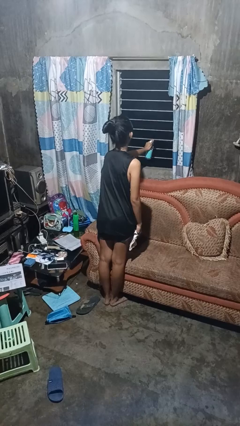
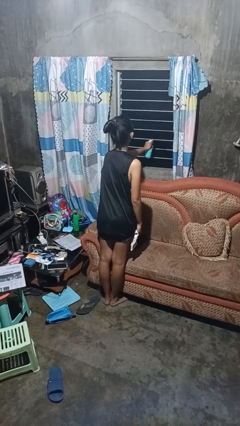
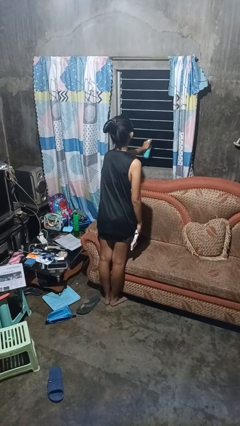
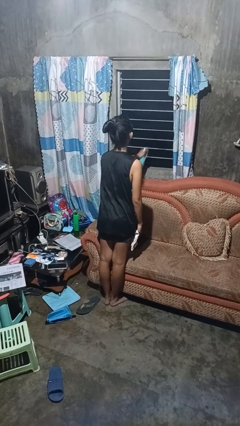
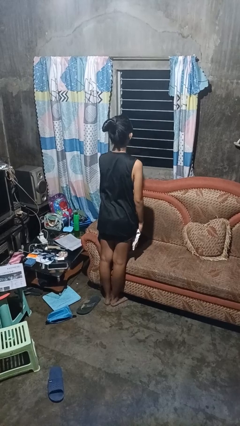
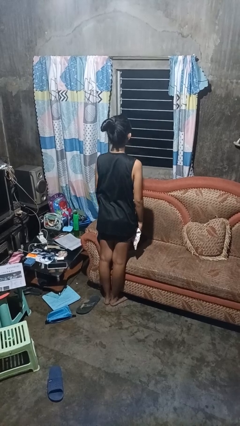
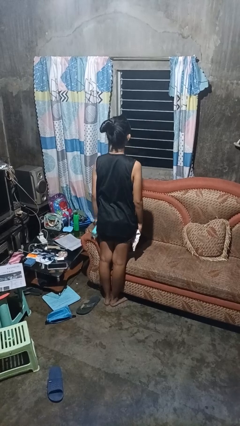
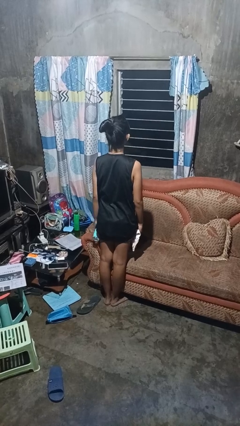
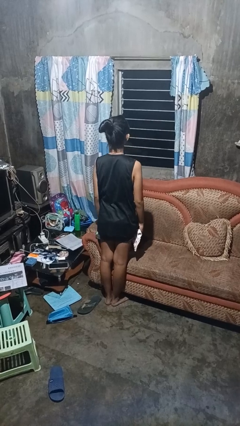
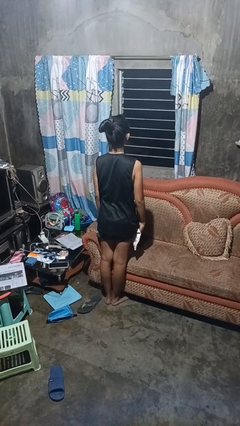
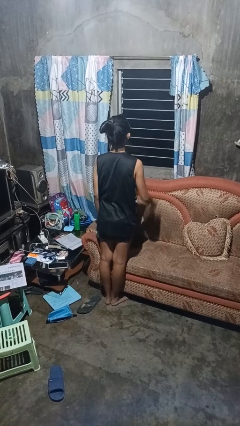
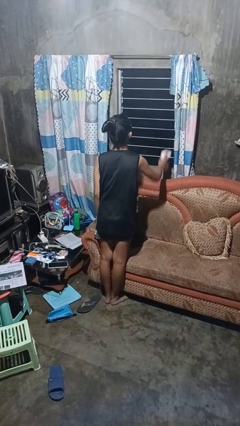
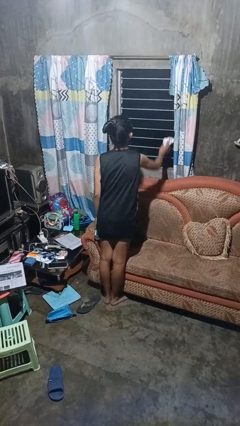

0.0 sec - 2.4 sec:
person sprays from bottle

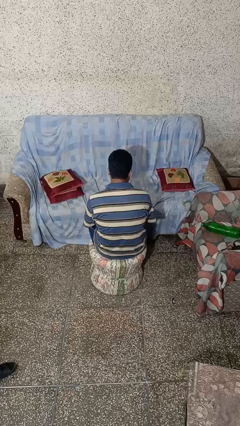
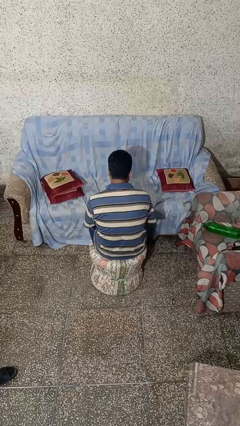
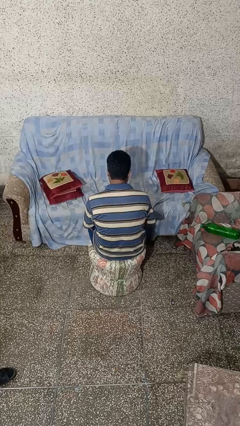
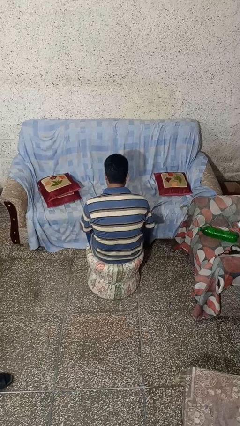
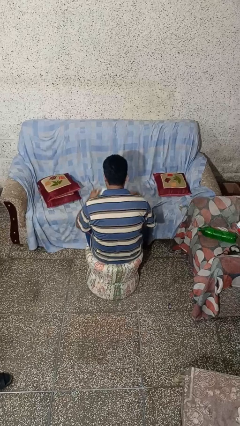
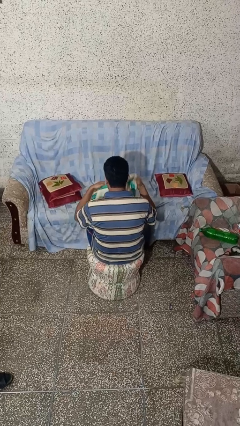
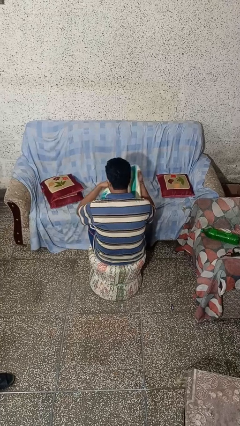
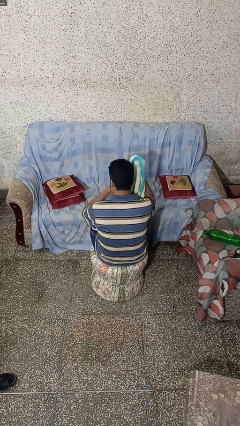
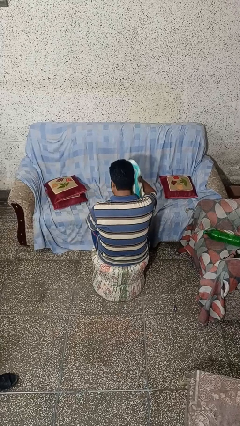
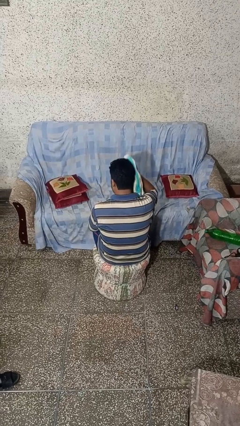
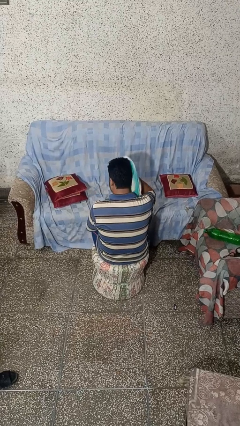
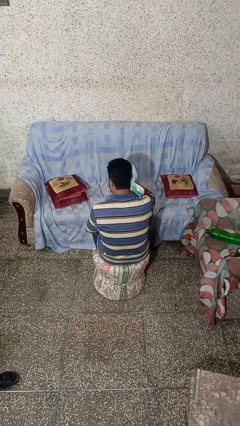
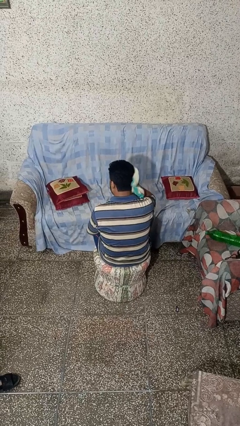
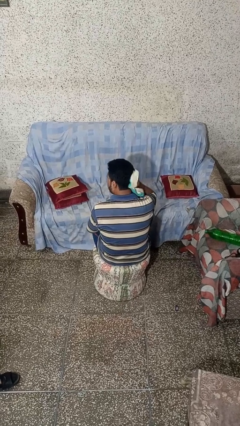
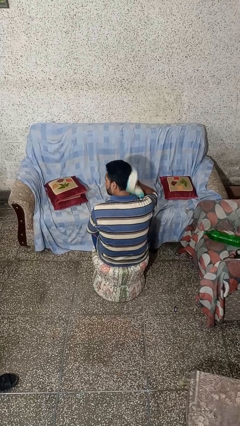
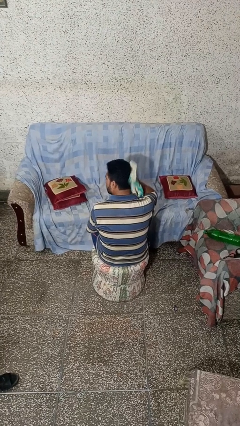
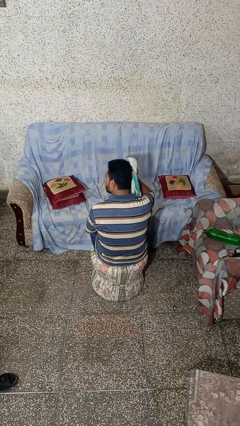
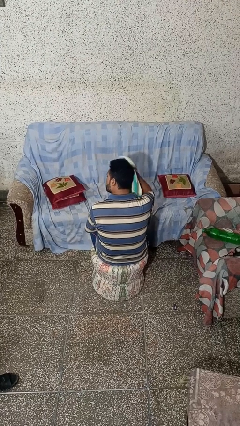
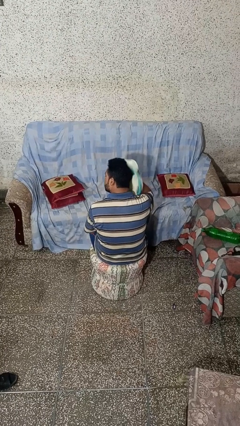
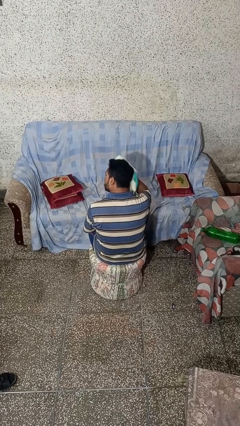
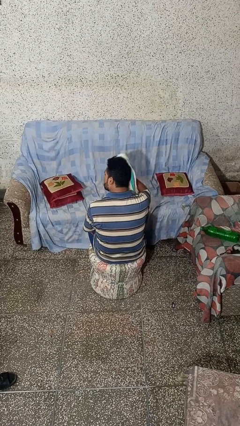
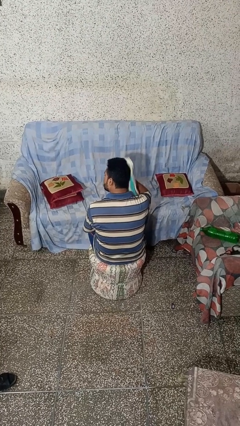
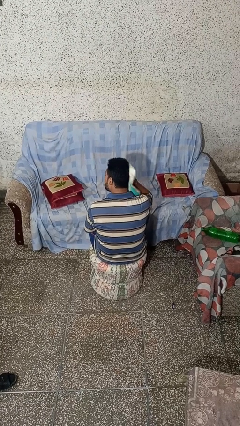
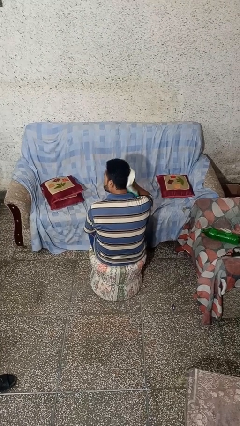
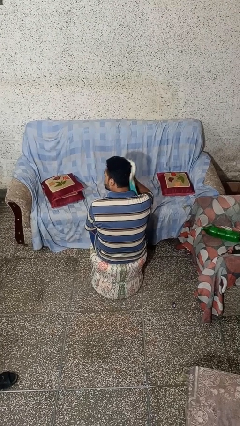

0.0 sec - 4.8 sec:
person dries hair with towel

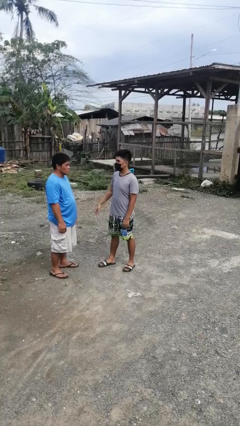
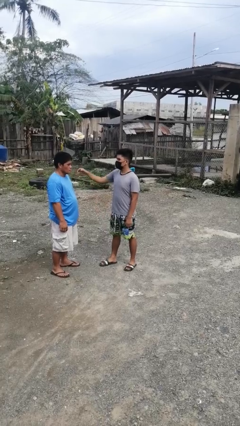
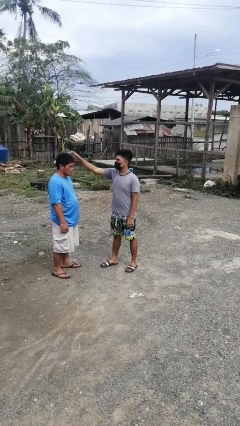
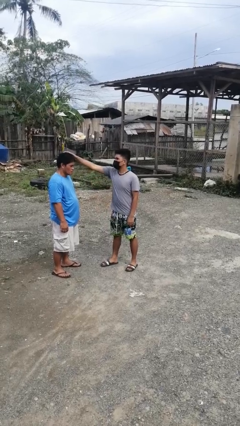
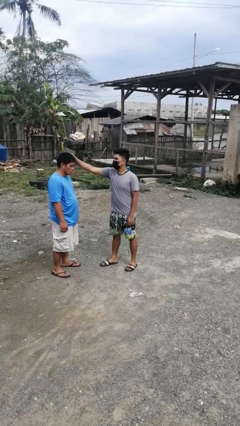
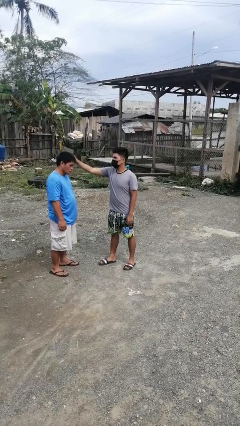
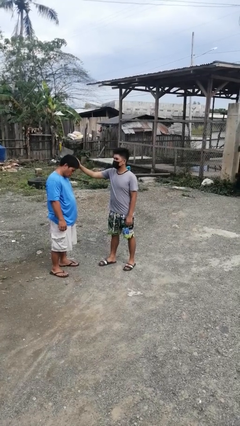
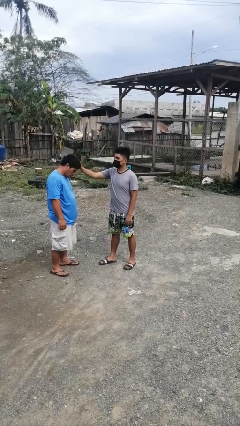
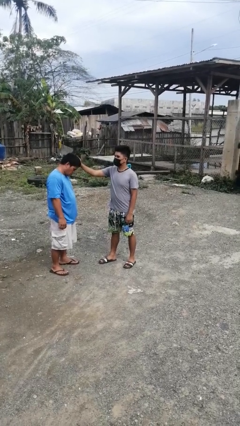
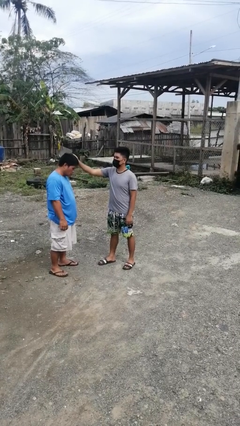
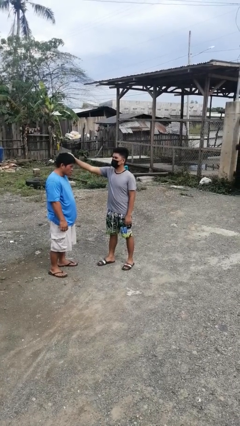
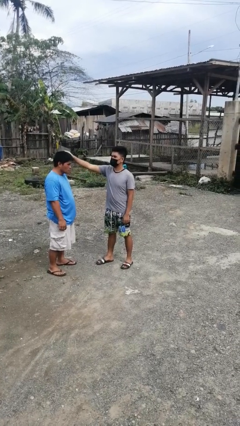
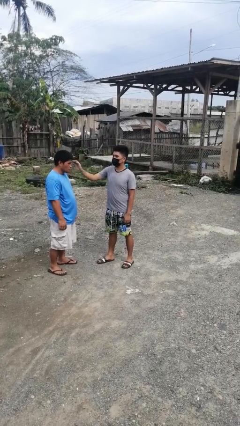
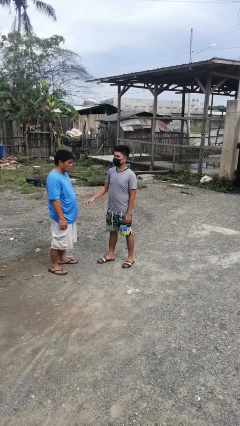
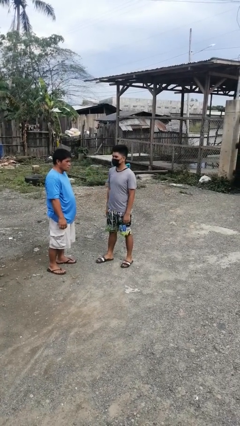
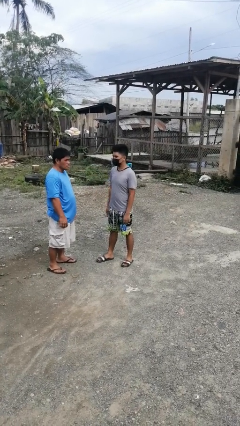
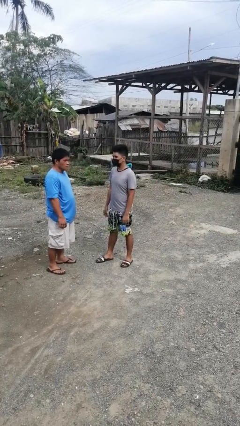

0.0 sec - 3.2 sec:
person grabs person by hair

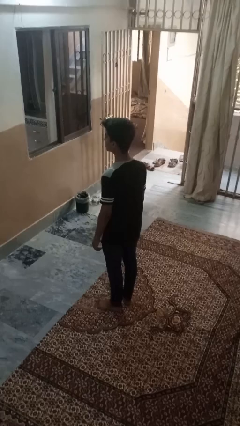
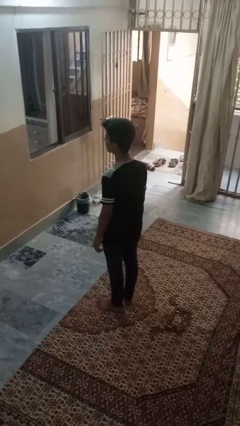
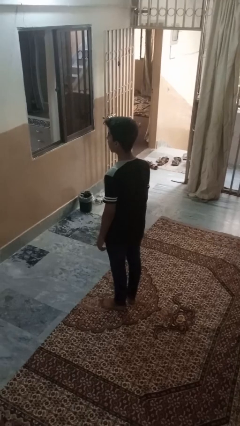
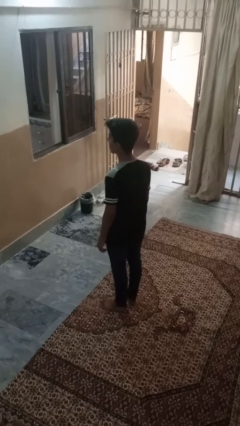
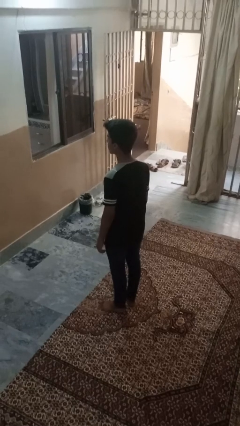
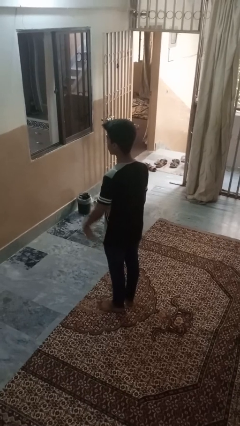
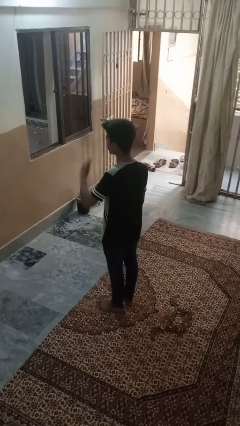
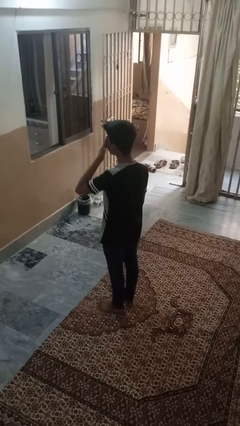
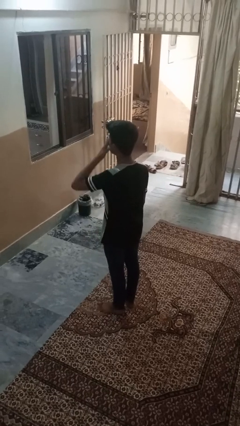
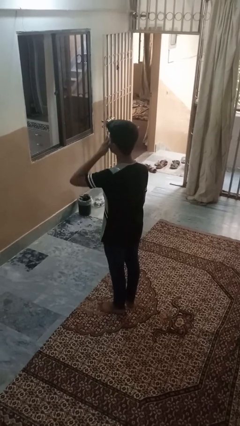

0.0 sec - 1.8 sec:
person rubs eyes

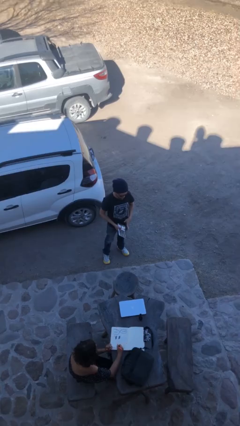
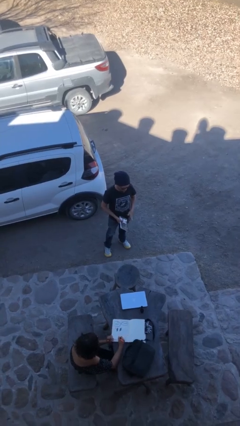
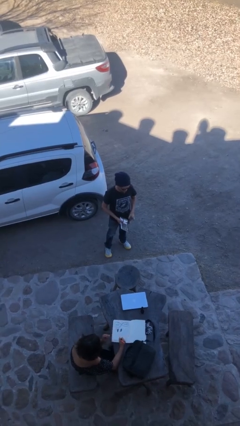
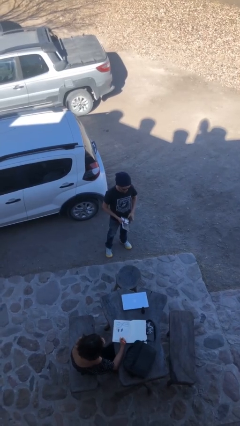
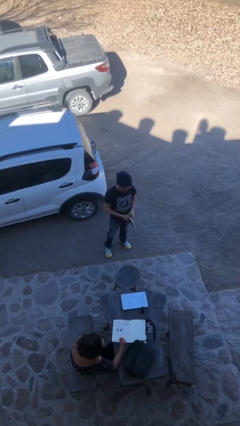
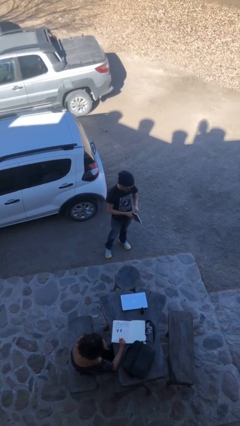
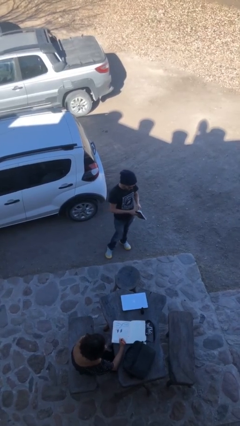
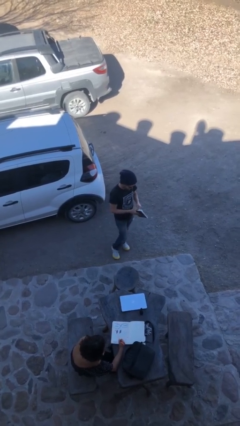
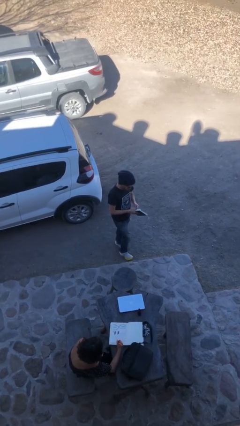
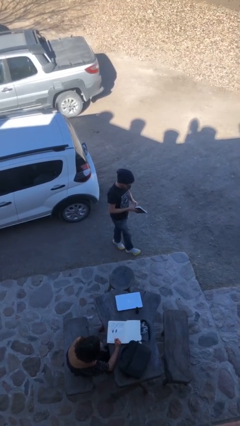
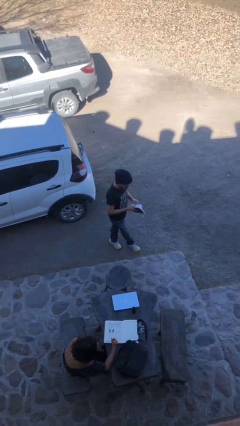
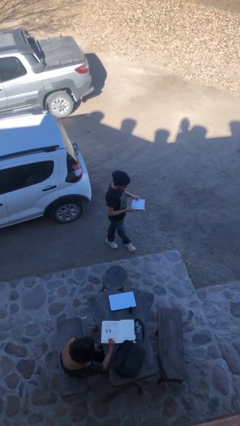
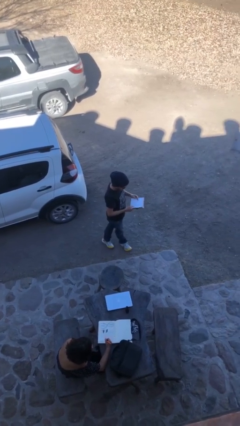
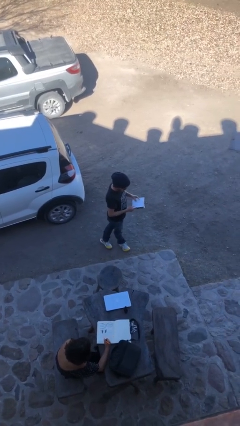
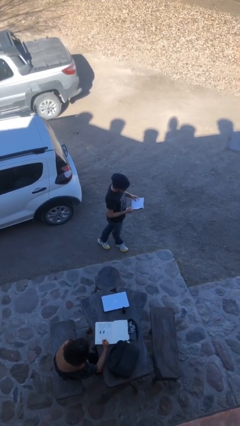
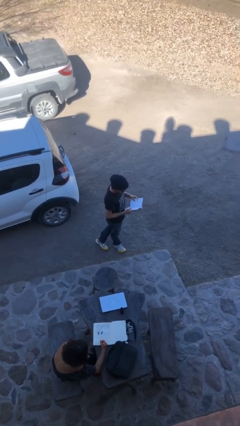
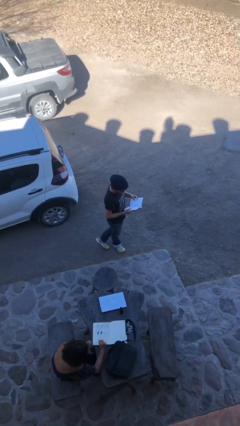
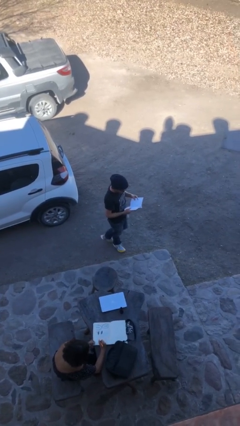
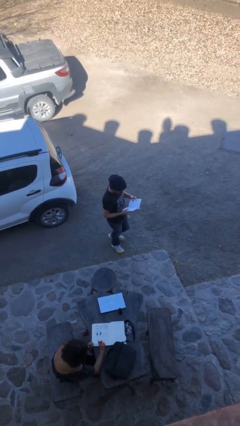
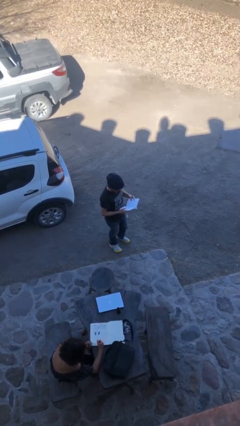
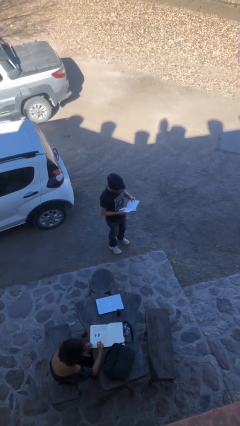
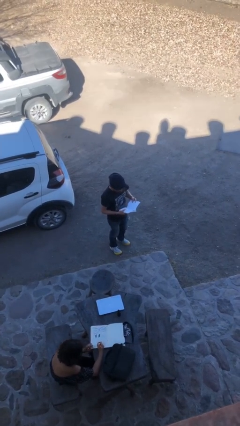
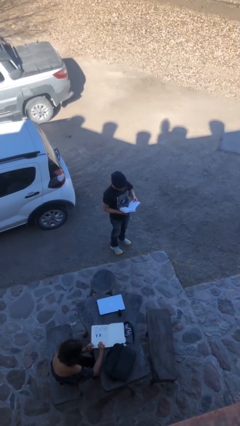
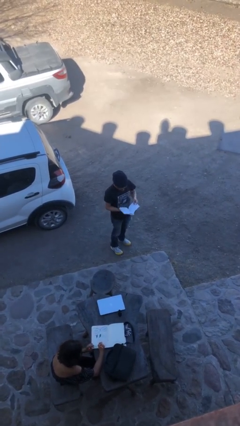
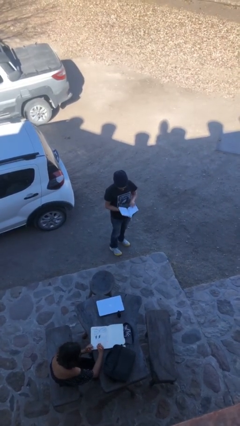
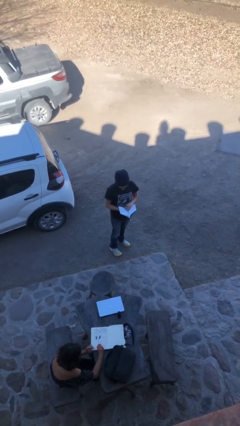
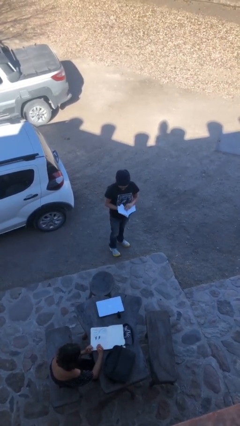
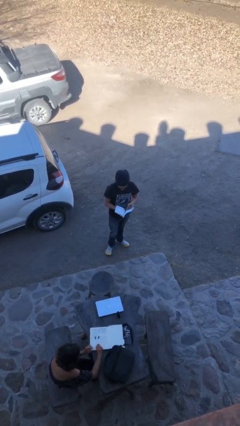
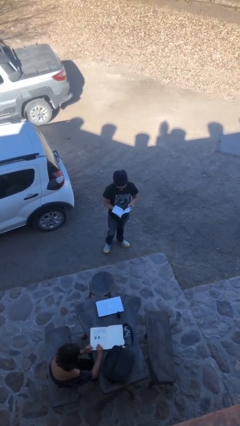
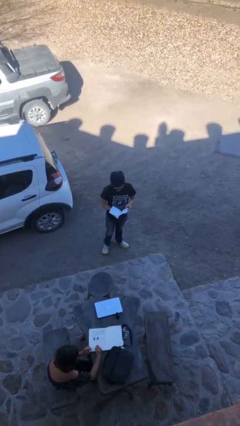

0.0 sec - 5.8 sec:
person reads document
